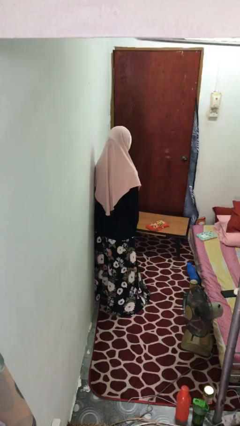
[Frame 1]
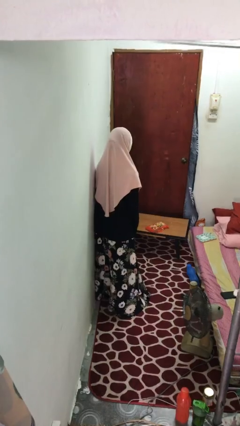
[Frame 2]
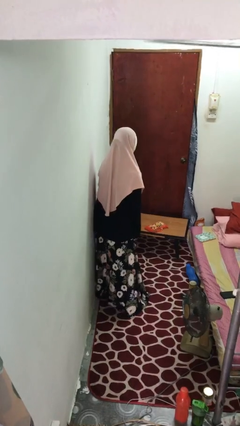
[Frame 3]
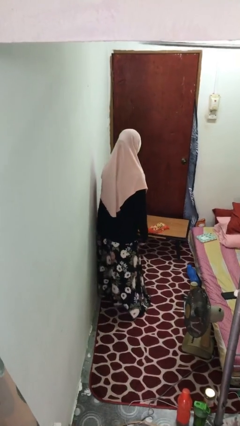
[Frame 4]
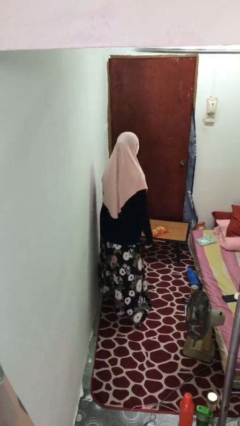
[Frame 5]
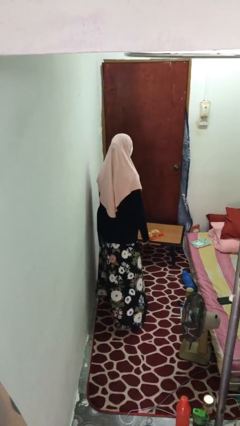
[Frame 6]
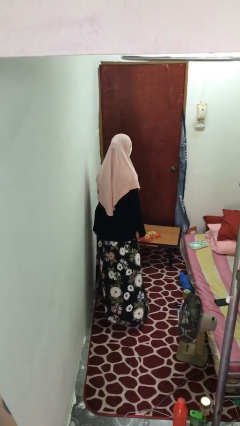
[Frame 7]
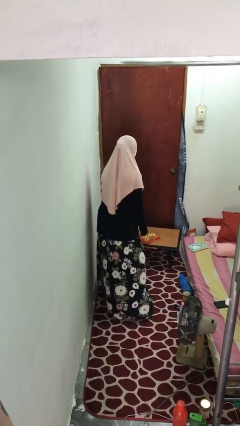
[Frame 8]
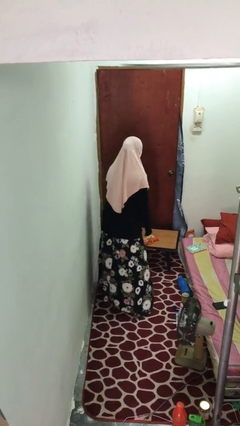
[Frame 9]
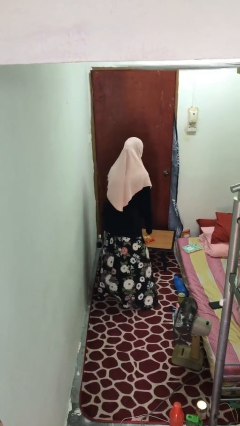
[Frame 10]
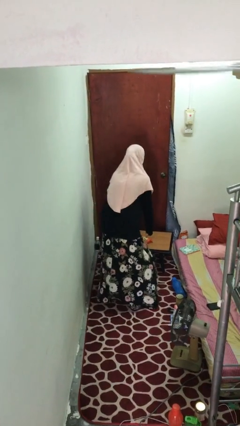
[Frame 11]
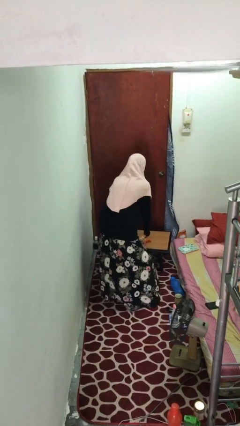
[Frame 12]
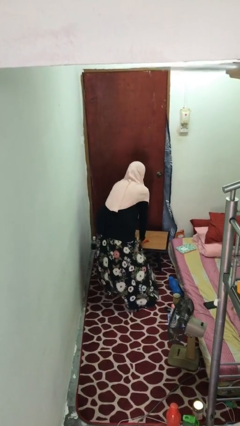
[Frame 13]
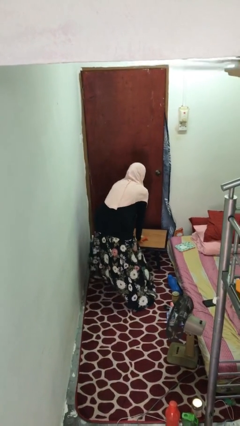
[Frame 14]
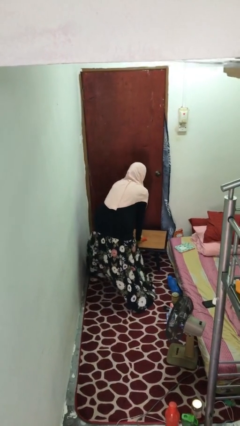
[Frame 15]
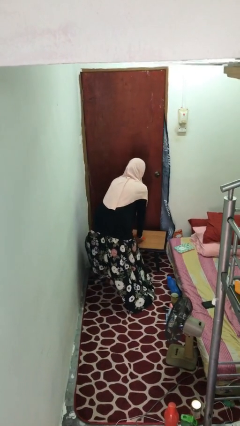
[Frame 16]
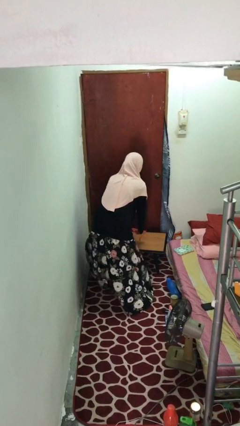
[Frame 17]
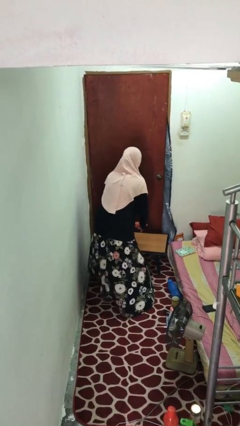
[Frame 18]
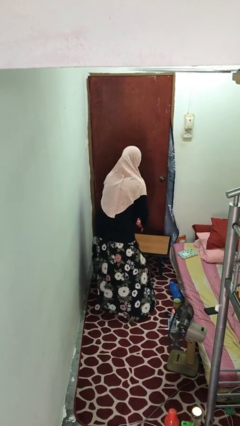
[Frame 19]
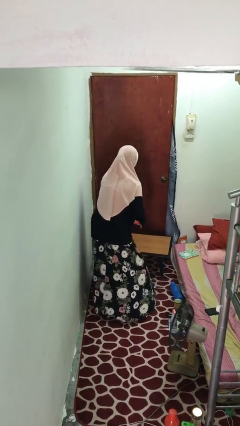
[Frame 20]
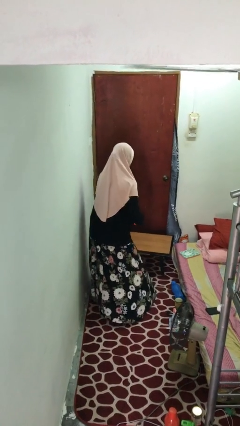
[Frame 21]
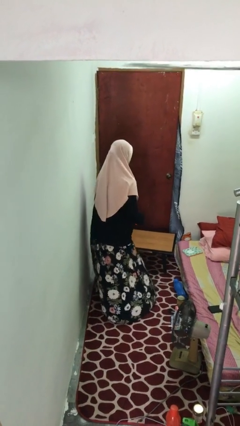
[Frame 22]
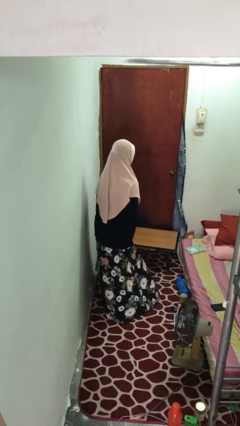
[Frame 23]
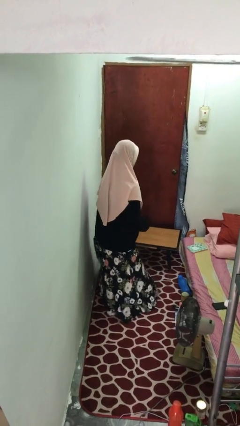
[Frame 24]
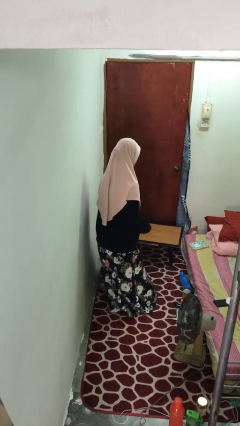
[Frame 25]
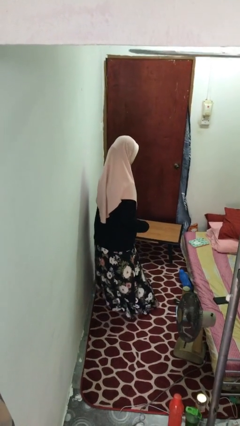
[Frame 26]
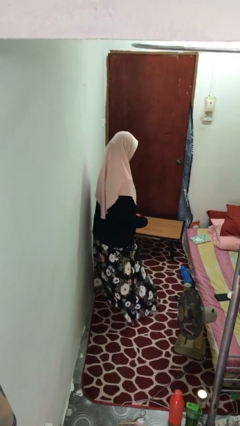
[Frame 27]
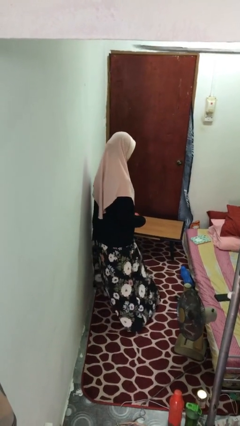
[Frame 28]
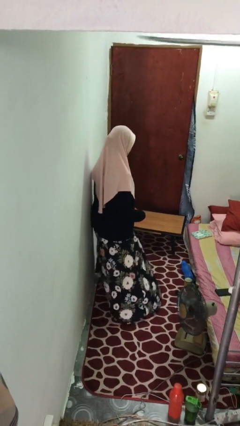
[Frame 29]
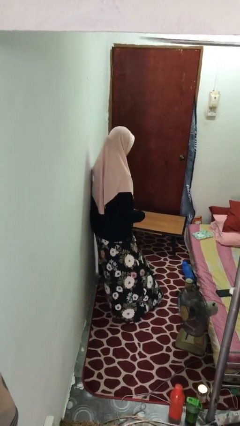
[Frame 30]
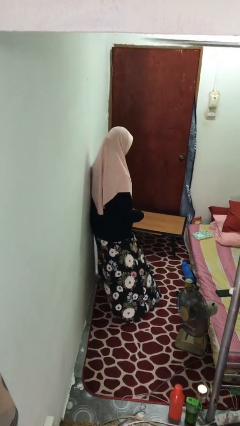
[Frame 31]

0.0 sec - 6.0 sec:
person picks up object from table

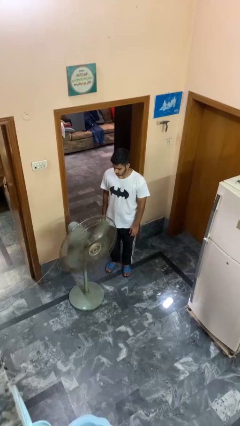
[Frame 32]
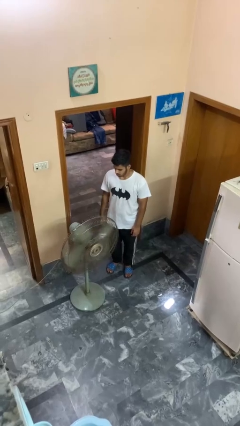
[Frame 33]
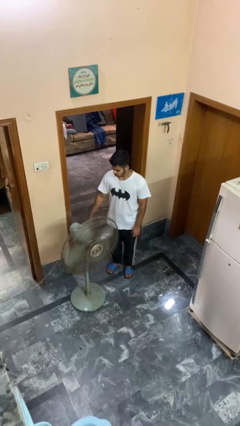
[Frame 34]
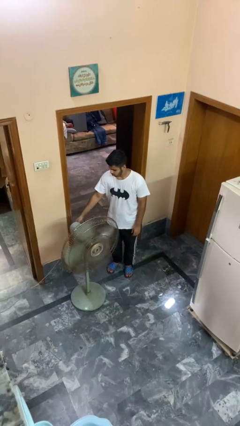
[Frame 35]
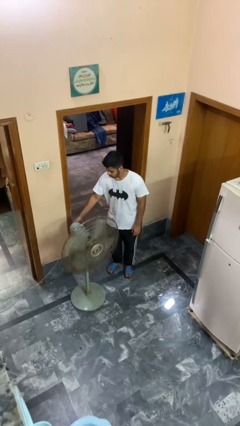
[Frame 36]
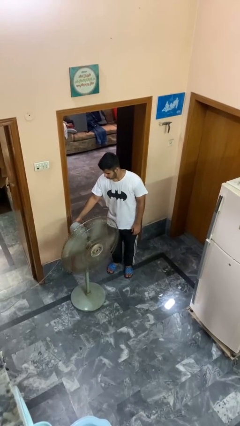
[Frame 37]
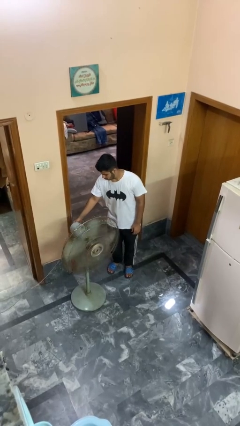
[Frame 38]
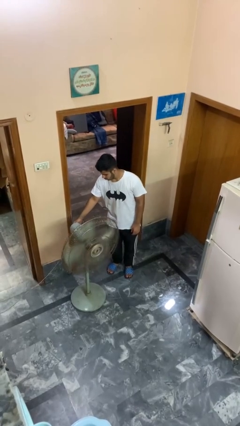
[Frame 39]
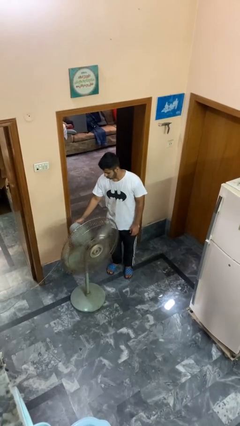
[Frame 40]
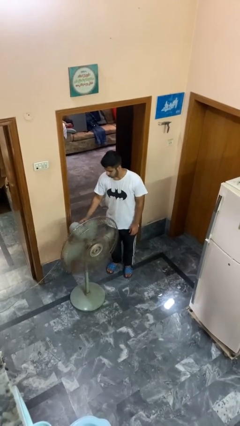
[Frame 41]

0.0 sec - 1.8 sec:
person turns off fan

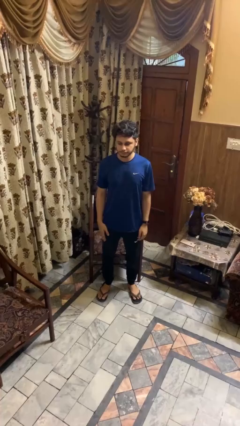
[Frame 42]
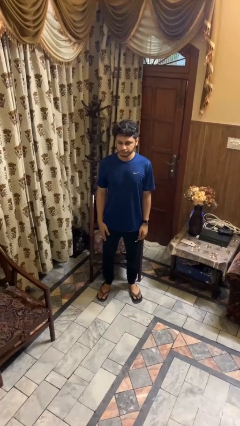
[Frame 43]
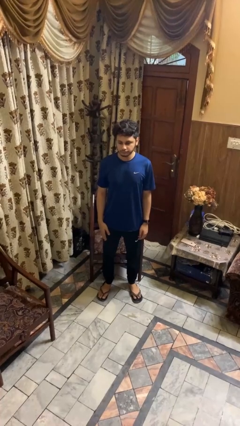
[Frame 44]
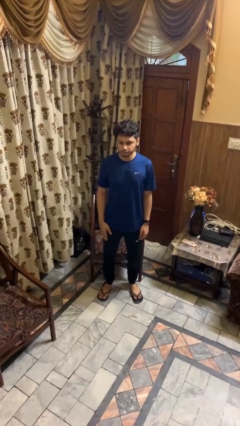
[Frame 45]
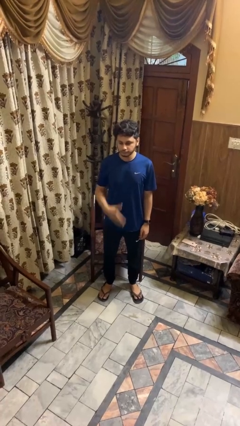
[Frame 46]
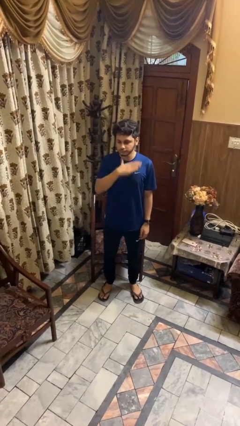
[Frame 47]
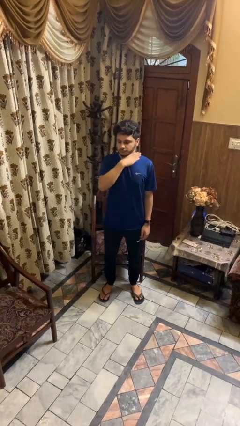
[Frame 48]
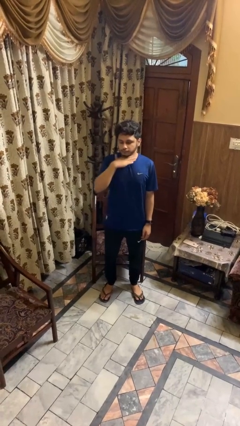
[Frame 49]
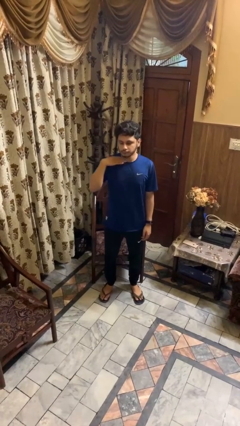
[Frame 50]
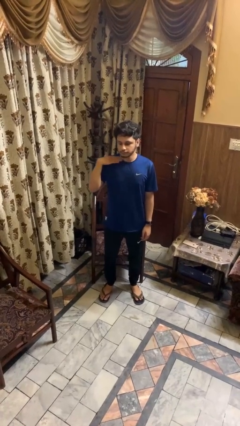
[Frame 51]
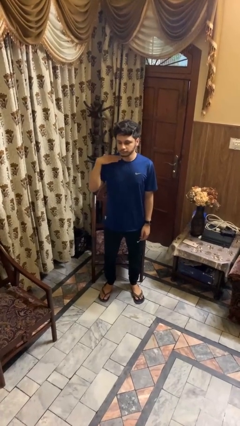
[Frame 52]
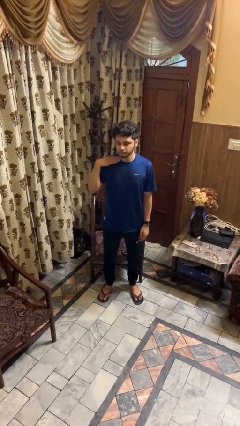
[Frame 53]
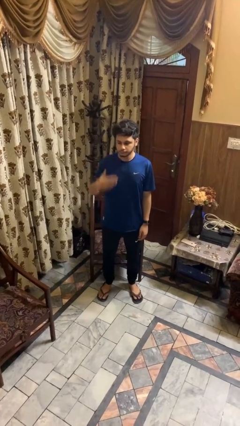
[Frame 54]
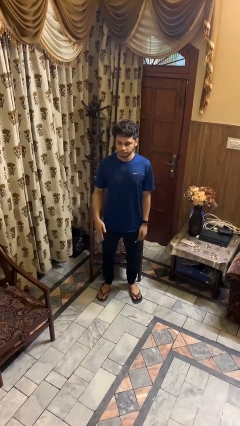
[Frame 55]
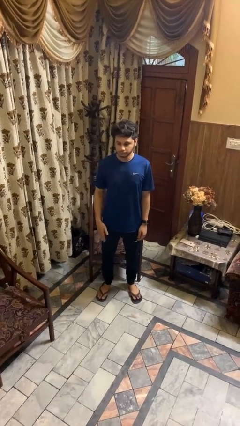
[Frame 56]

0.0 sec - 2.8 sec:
person gestures cut

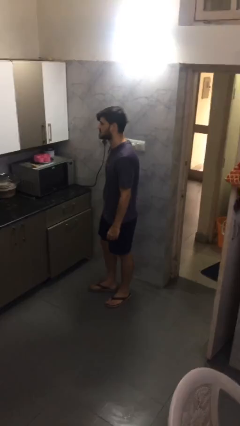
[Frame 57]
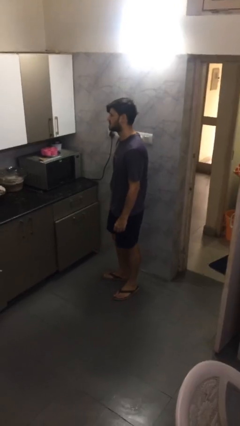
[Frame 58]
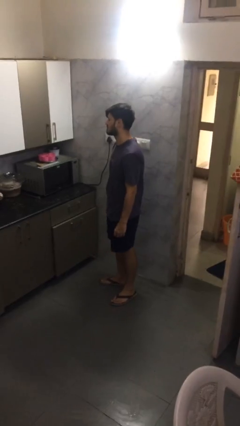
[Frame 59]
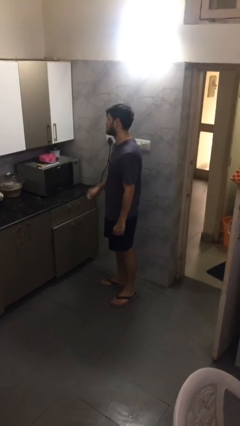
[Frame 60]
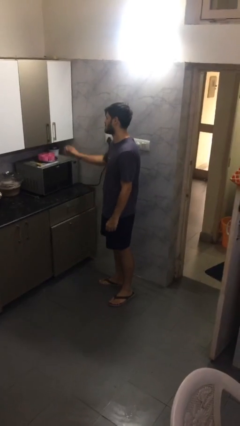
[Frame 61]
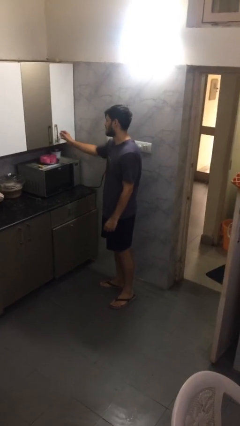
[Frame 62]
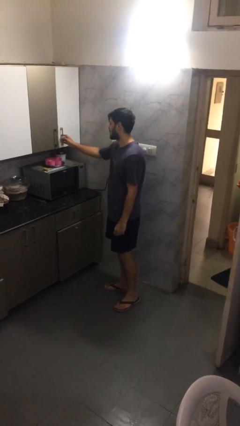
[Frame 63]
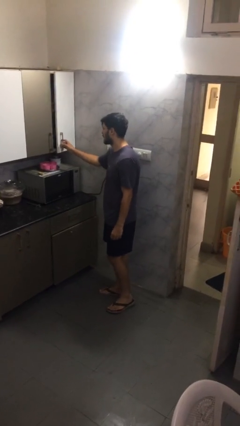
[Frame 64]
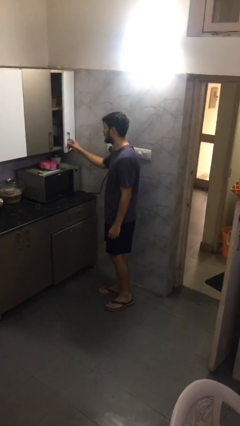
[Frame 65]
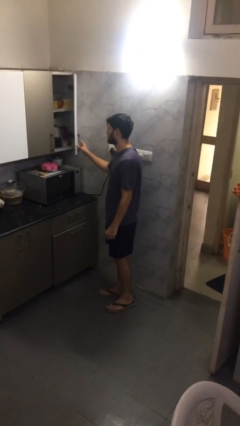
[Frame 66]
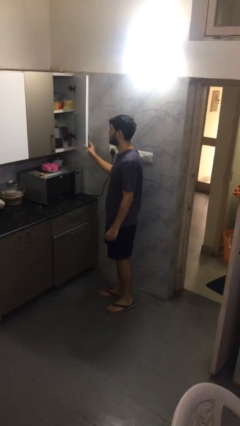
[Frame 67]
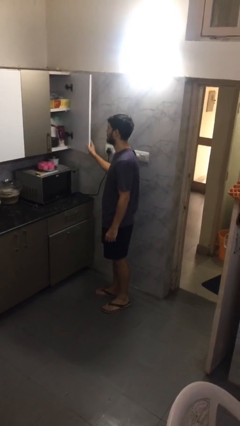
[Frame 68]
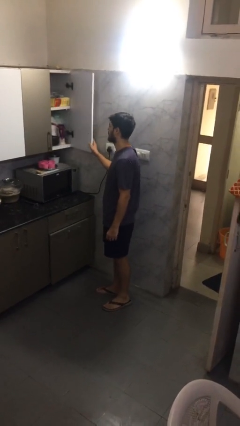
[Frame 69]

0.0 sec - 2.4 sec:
person opens cabinet

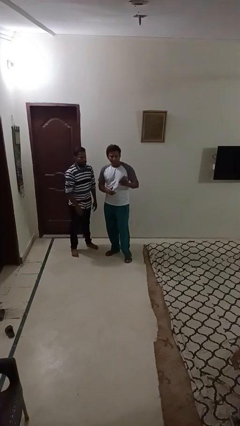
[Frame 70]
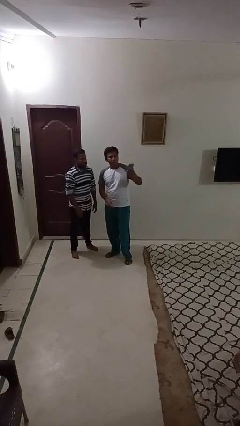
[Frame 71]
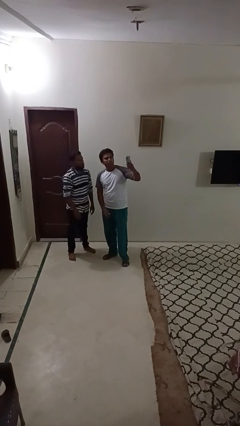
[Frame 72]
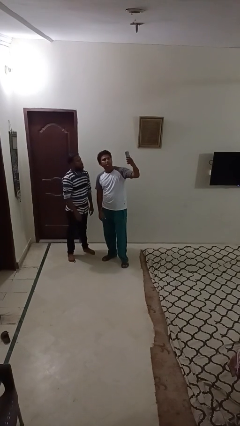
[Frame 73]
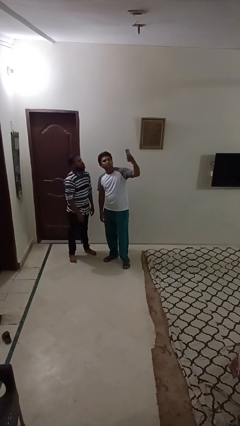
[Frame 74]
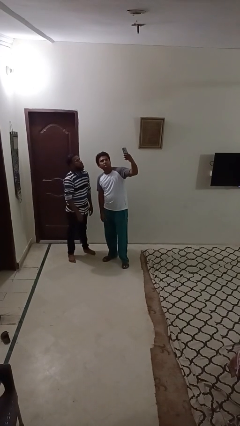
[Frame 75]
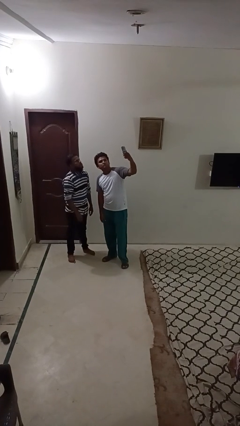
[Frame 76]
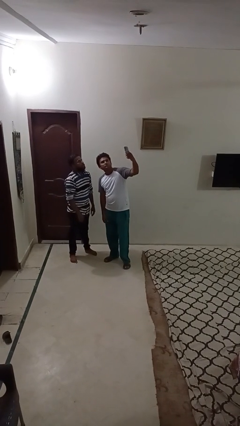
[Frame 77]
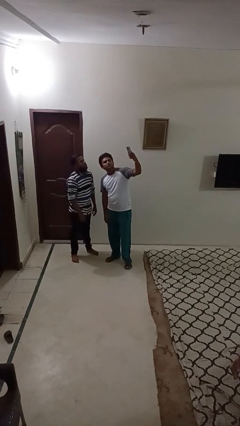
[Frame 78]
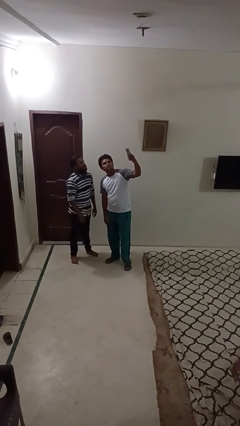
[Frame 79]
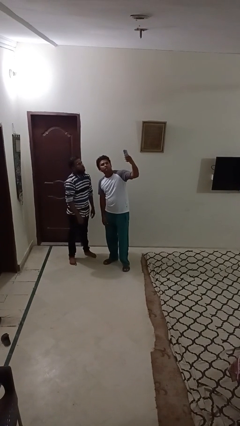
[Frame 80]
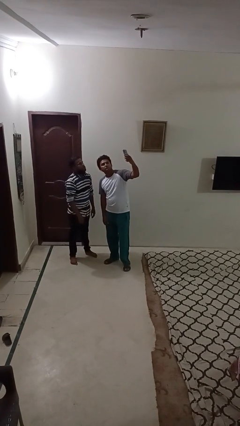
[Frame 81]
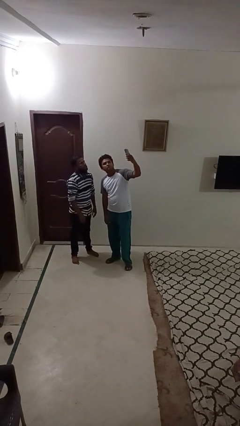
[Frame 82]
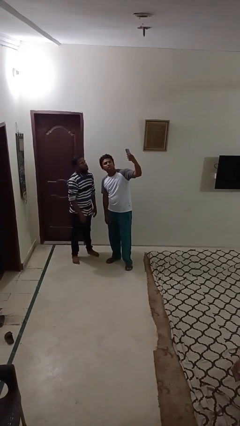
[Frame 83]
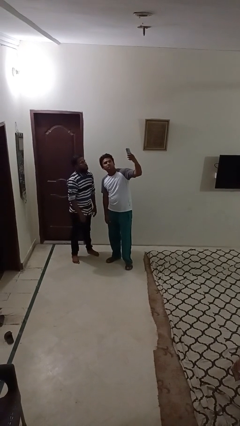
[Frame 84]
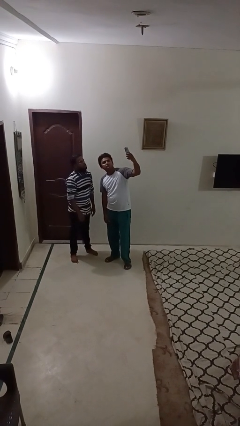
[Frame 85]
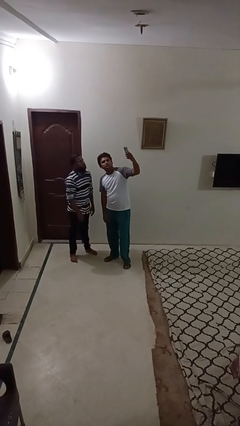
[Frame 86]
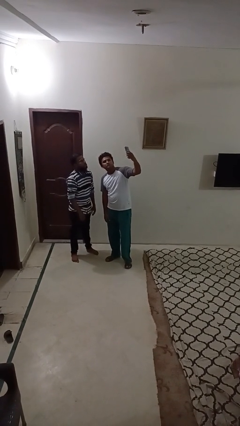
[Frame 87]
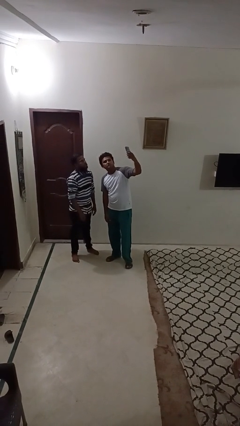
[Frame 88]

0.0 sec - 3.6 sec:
person takes selfie with person

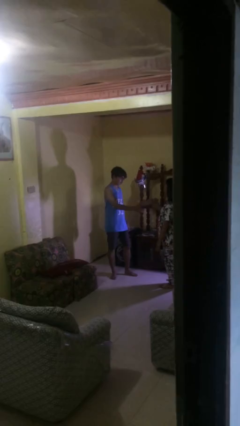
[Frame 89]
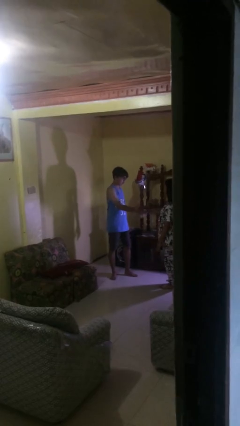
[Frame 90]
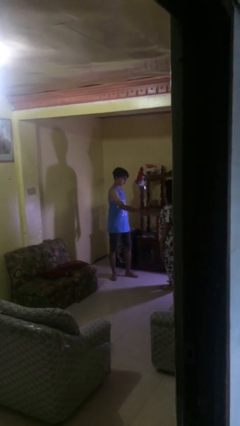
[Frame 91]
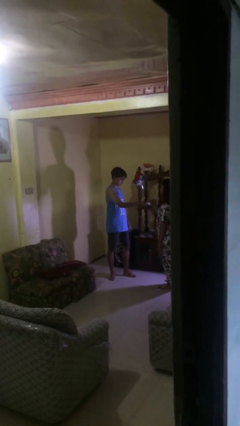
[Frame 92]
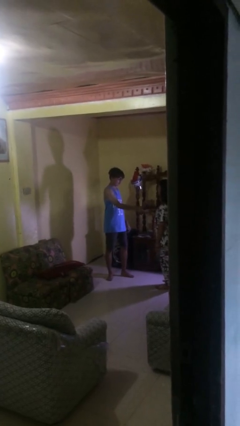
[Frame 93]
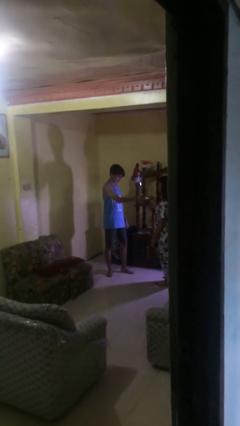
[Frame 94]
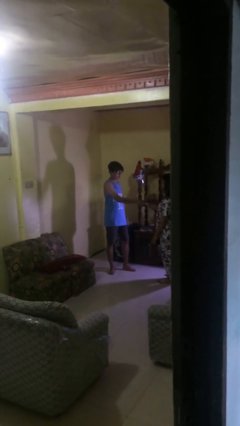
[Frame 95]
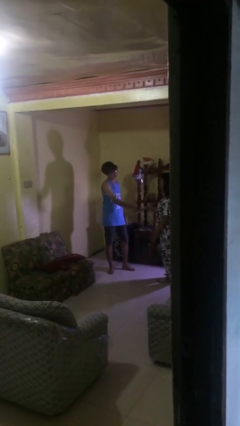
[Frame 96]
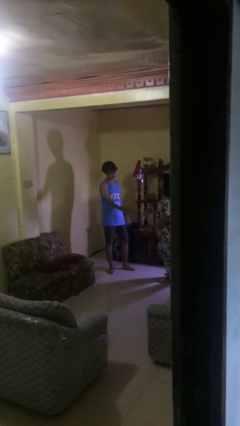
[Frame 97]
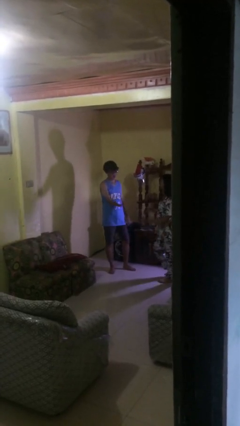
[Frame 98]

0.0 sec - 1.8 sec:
person shakes hand
